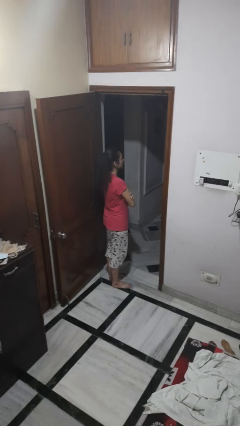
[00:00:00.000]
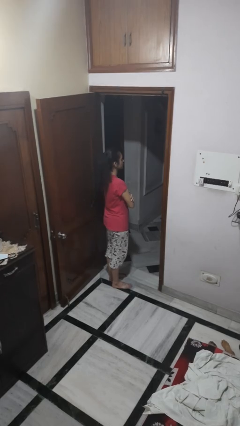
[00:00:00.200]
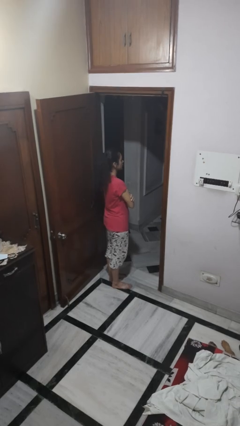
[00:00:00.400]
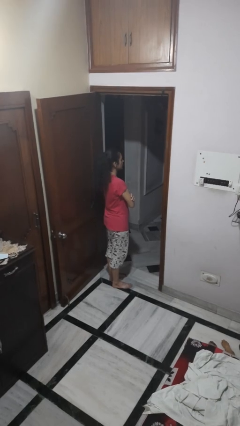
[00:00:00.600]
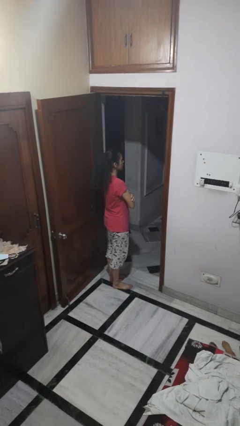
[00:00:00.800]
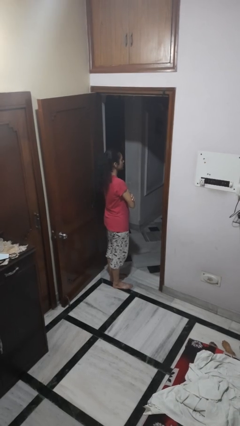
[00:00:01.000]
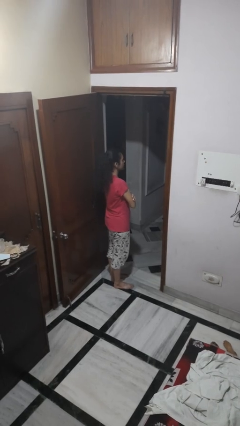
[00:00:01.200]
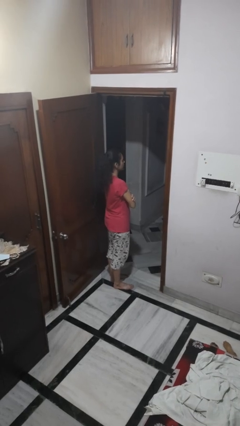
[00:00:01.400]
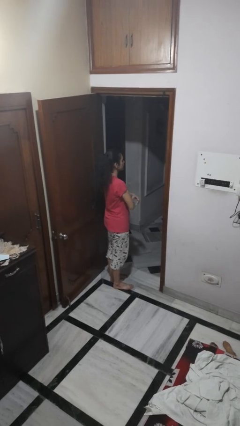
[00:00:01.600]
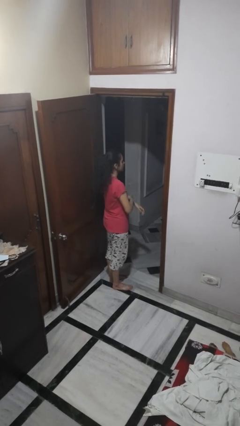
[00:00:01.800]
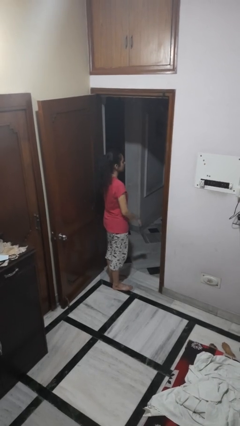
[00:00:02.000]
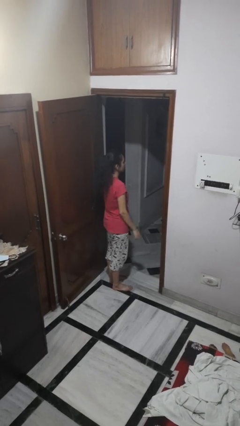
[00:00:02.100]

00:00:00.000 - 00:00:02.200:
person crosses arms

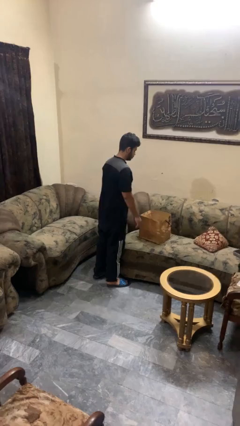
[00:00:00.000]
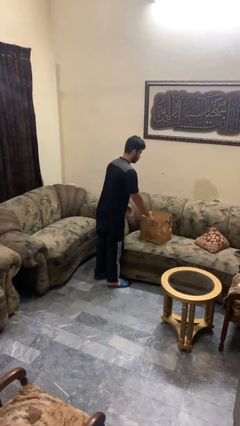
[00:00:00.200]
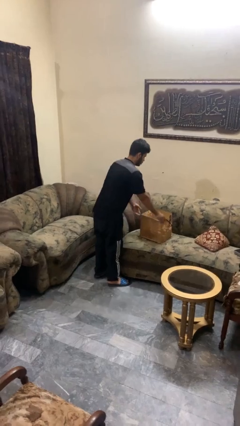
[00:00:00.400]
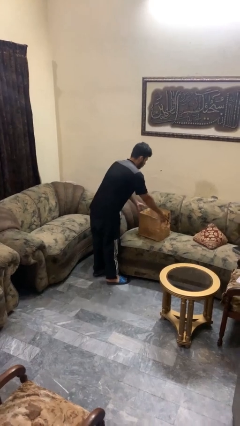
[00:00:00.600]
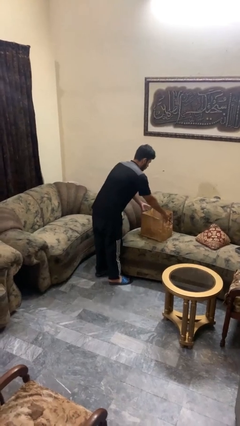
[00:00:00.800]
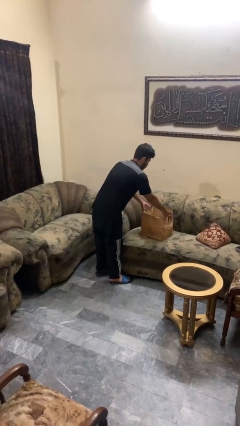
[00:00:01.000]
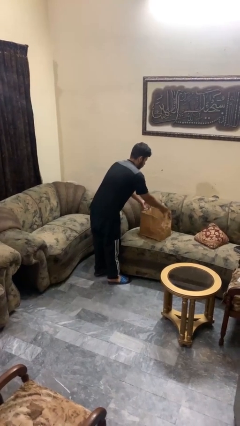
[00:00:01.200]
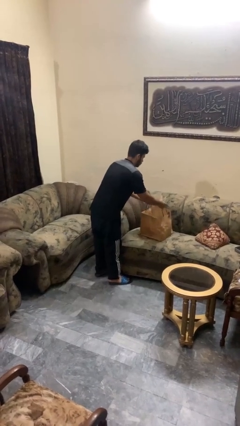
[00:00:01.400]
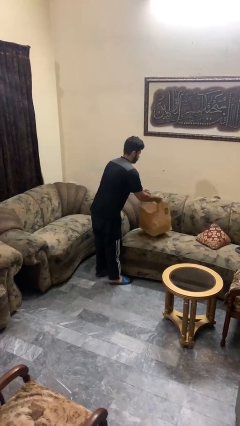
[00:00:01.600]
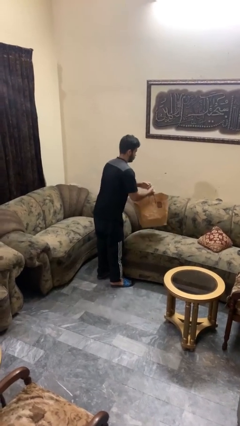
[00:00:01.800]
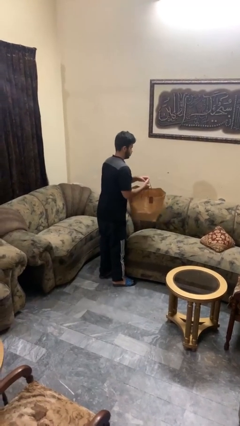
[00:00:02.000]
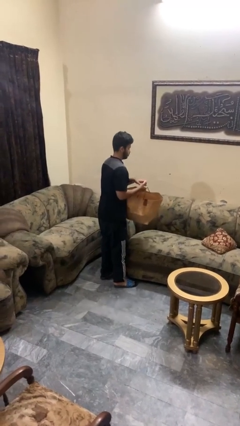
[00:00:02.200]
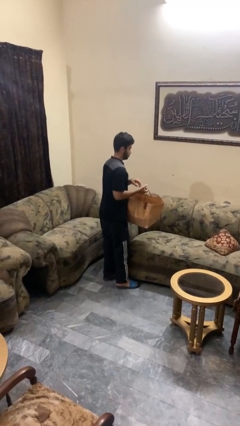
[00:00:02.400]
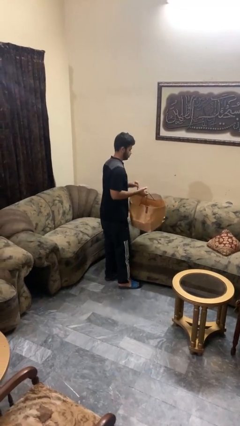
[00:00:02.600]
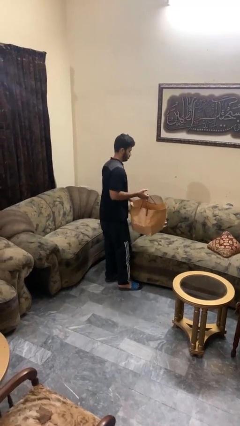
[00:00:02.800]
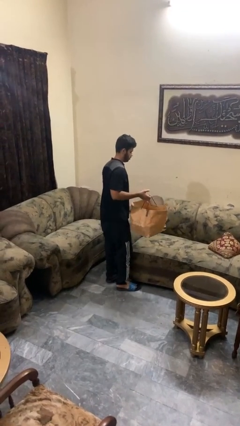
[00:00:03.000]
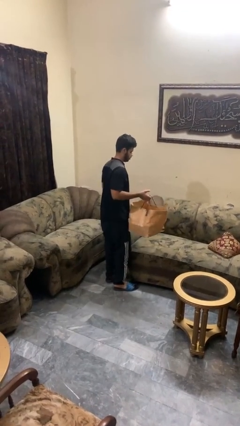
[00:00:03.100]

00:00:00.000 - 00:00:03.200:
person picks up object from couch

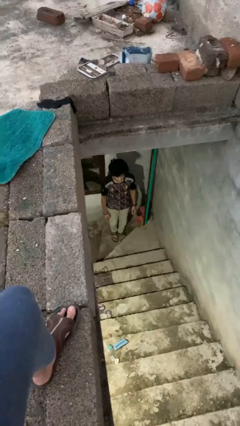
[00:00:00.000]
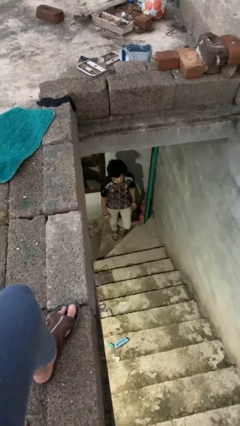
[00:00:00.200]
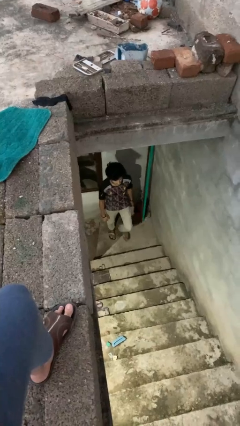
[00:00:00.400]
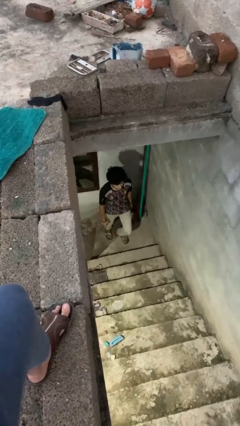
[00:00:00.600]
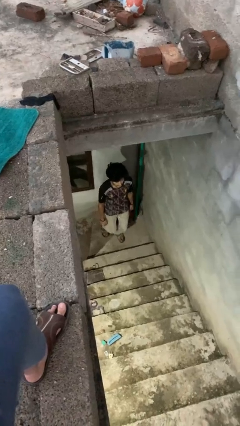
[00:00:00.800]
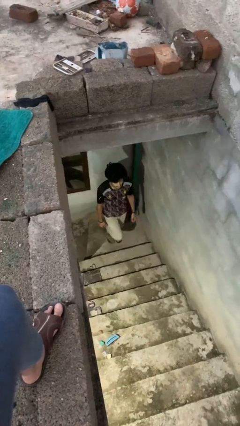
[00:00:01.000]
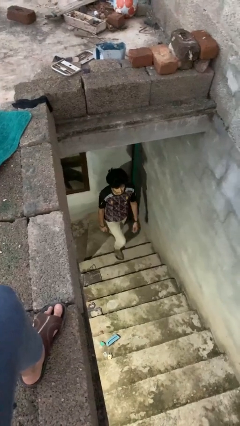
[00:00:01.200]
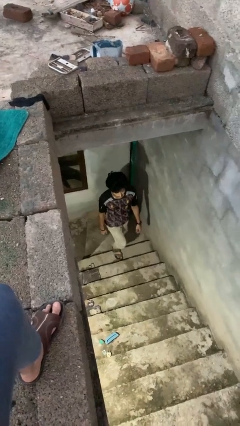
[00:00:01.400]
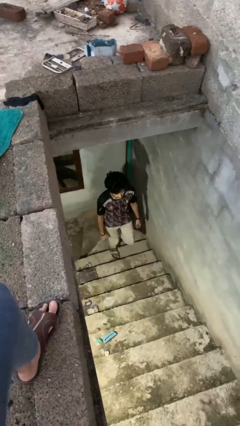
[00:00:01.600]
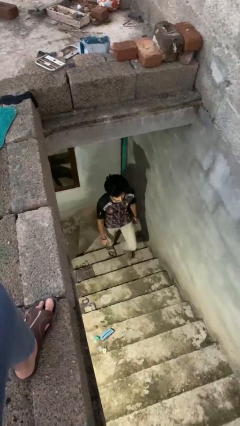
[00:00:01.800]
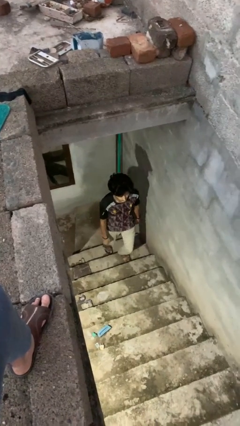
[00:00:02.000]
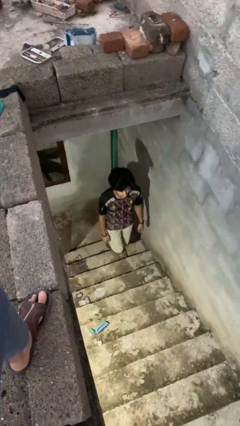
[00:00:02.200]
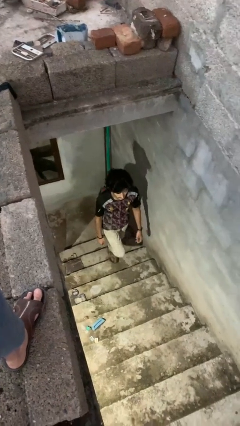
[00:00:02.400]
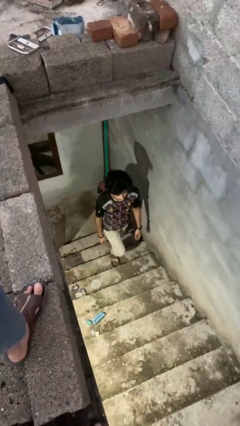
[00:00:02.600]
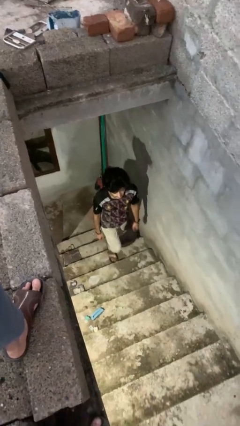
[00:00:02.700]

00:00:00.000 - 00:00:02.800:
person climbs up stairs

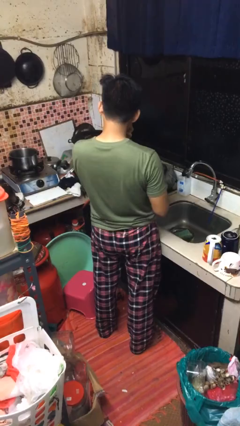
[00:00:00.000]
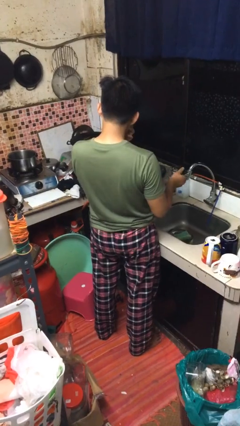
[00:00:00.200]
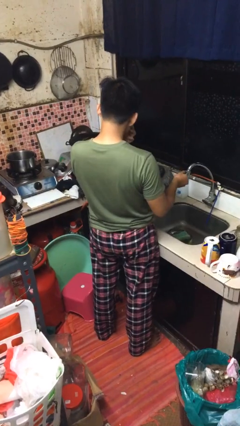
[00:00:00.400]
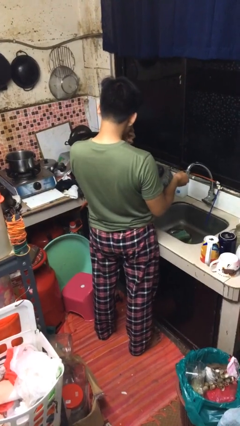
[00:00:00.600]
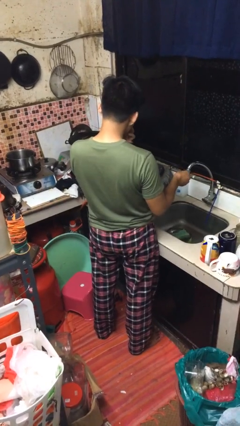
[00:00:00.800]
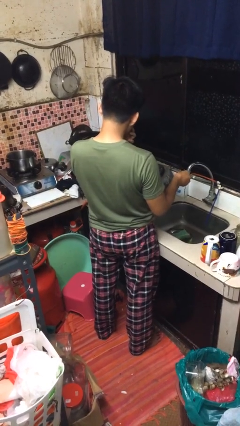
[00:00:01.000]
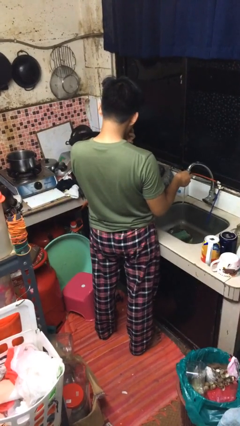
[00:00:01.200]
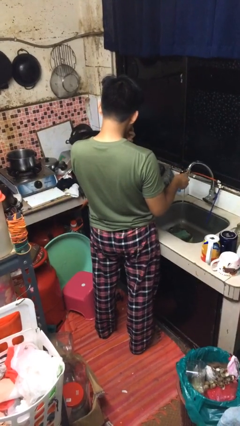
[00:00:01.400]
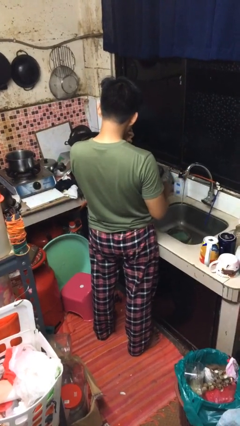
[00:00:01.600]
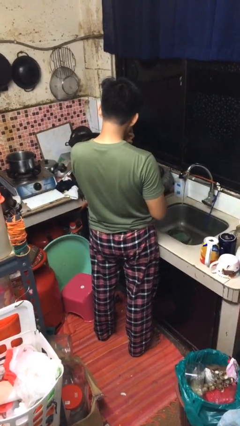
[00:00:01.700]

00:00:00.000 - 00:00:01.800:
person turns on faucet

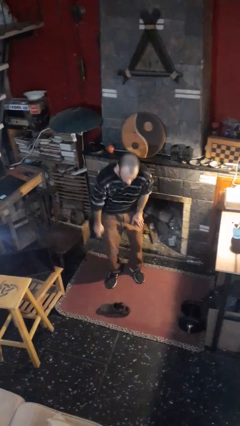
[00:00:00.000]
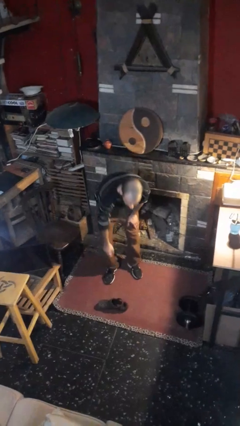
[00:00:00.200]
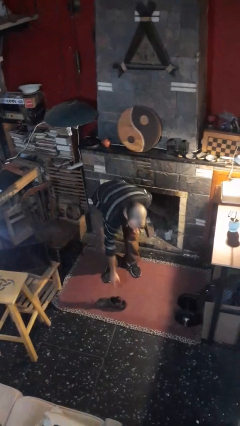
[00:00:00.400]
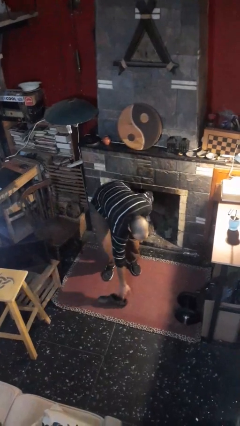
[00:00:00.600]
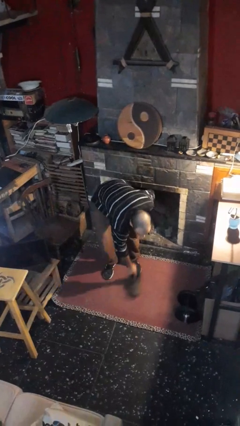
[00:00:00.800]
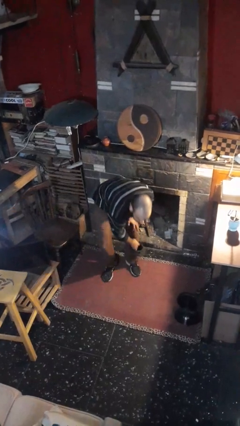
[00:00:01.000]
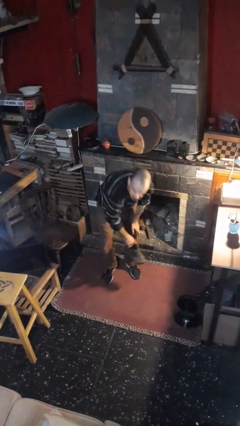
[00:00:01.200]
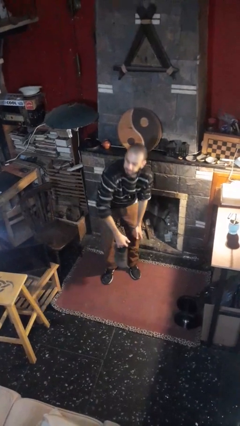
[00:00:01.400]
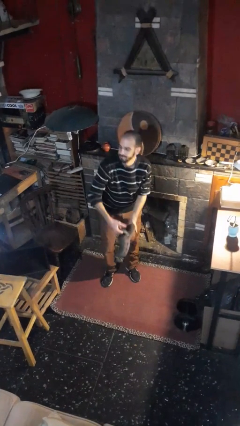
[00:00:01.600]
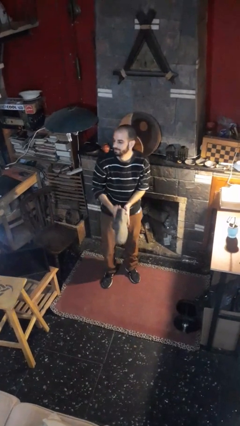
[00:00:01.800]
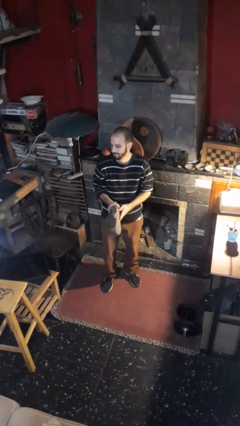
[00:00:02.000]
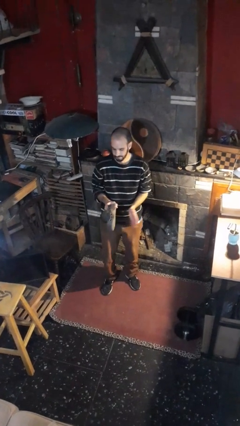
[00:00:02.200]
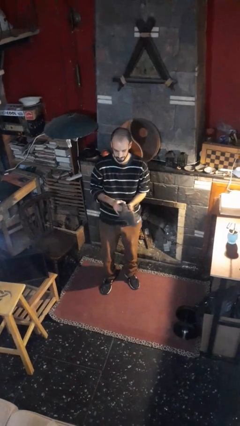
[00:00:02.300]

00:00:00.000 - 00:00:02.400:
person picks up object from floor

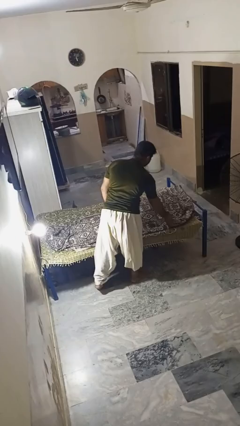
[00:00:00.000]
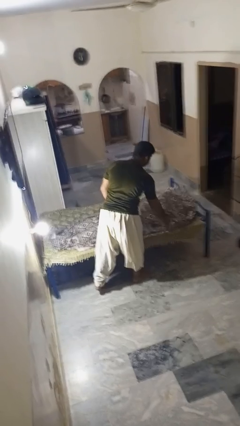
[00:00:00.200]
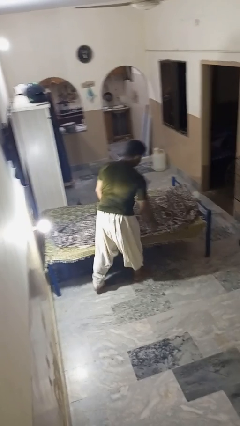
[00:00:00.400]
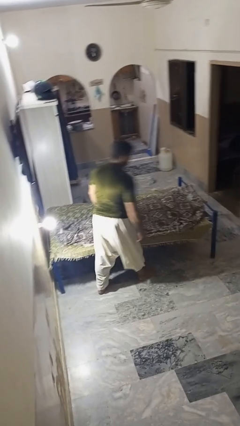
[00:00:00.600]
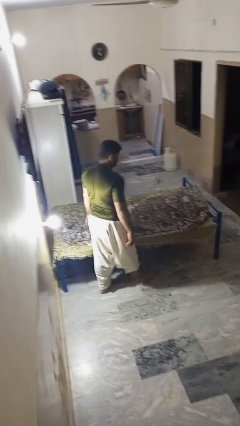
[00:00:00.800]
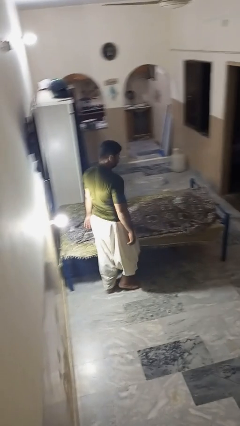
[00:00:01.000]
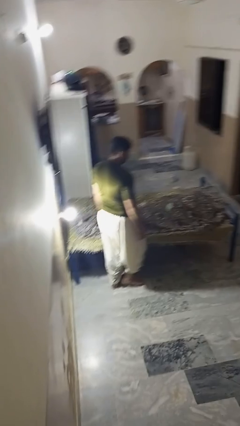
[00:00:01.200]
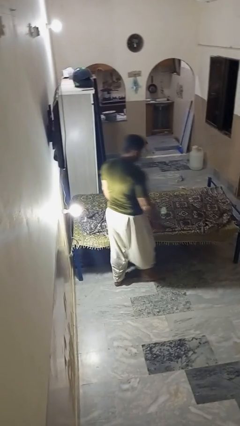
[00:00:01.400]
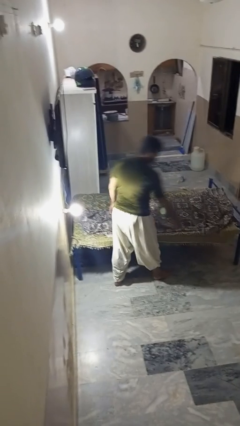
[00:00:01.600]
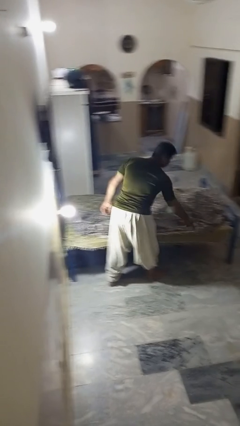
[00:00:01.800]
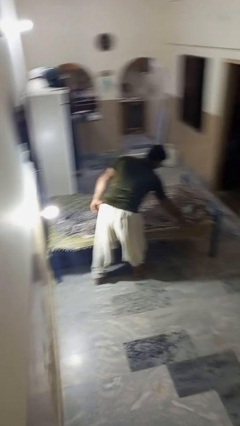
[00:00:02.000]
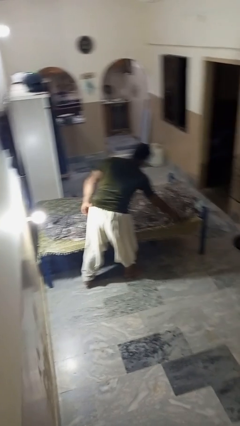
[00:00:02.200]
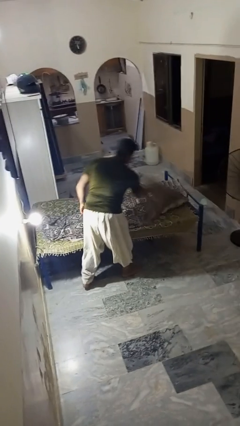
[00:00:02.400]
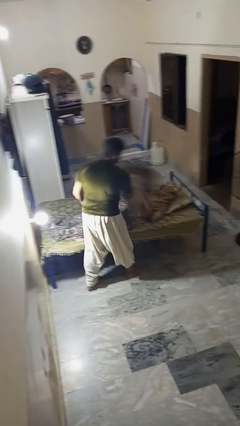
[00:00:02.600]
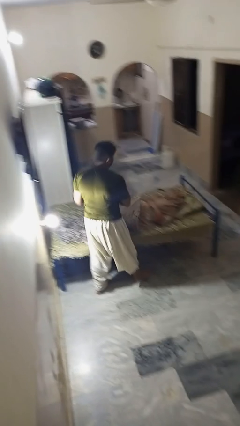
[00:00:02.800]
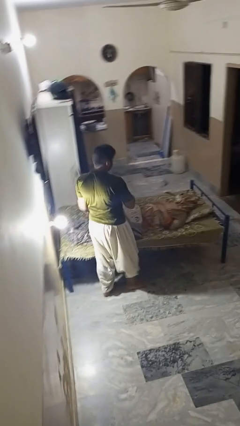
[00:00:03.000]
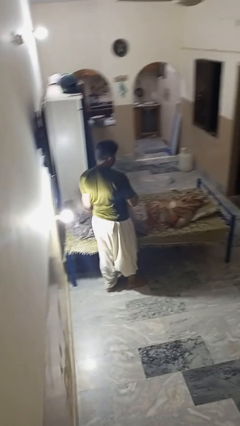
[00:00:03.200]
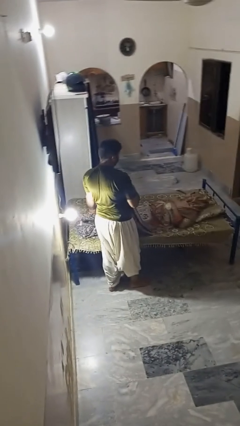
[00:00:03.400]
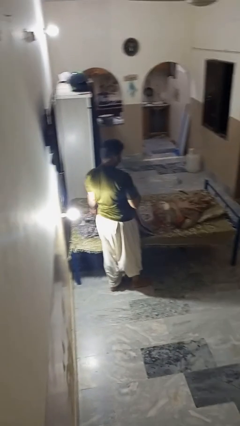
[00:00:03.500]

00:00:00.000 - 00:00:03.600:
person uncovers friend with blanket

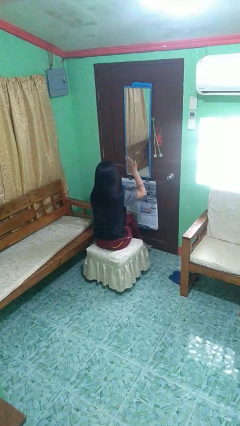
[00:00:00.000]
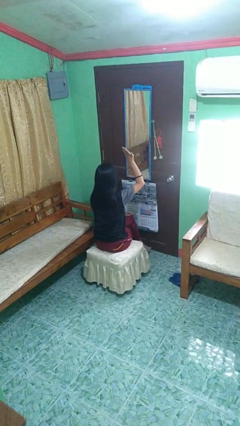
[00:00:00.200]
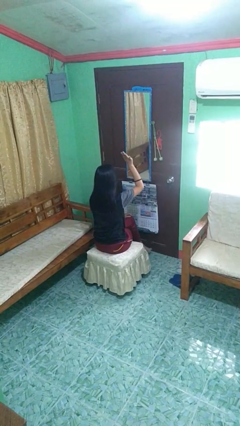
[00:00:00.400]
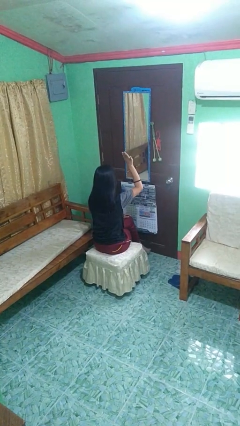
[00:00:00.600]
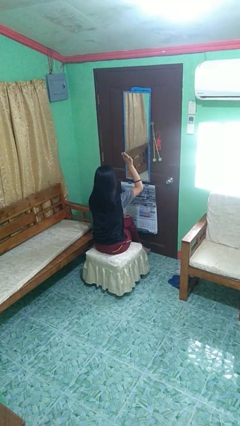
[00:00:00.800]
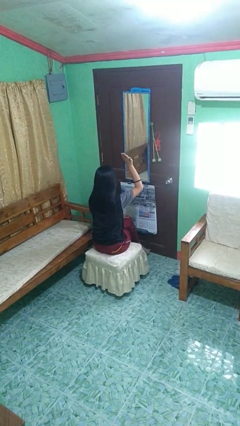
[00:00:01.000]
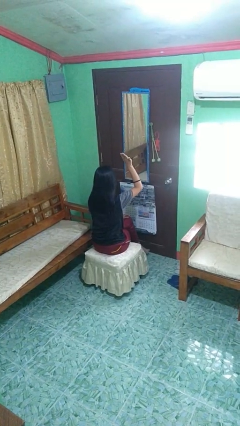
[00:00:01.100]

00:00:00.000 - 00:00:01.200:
person gestures raise hand
